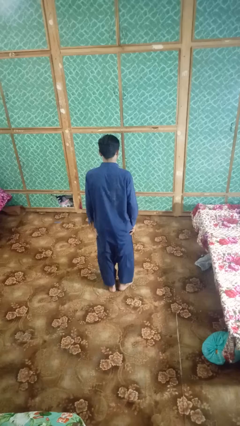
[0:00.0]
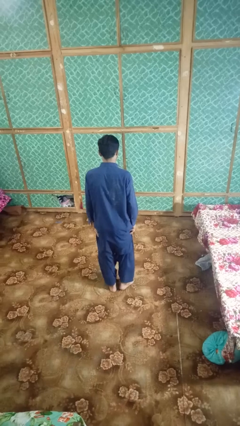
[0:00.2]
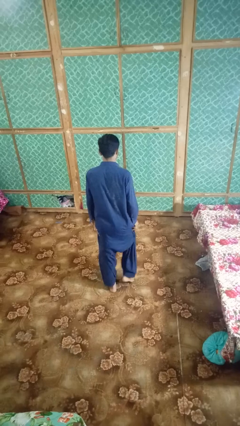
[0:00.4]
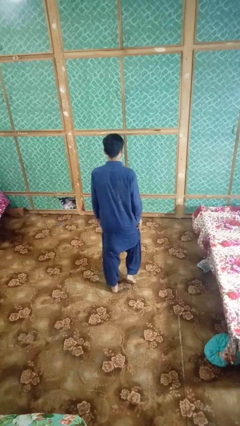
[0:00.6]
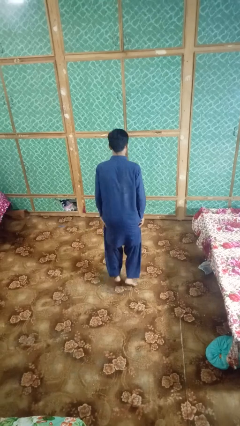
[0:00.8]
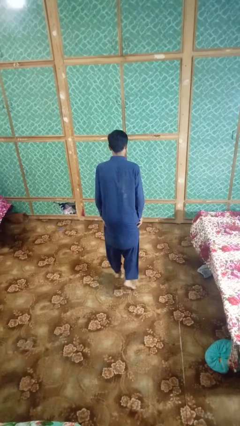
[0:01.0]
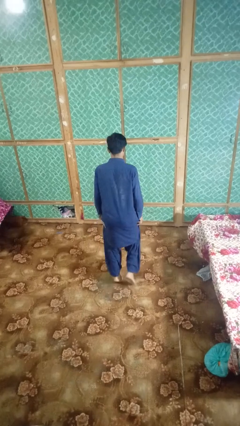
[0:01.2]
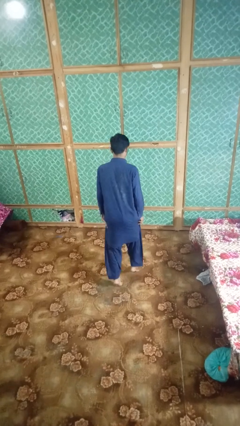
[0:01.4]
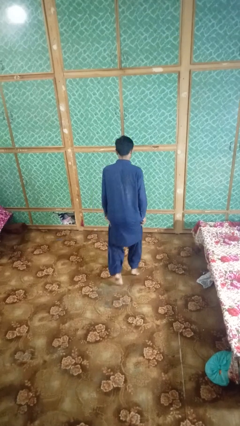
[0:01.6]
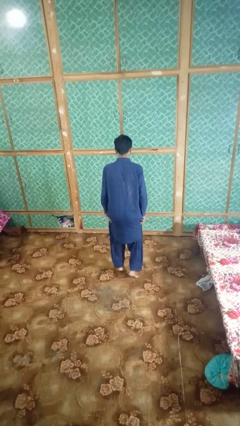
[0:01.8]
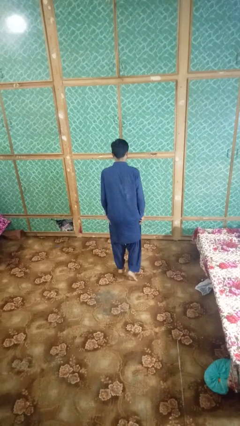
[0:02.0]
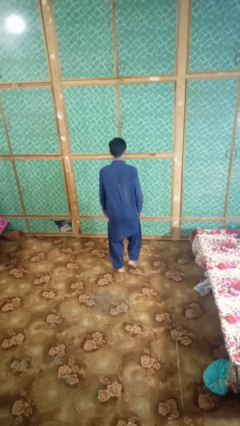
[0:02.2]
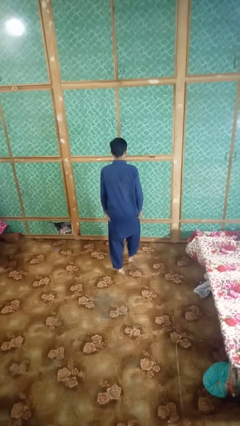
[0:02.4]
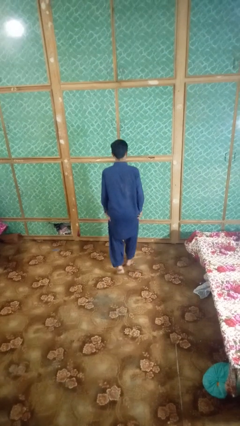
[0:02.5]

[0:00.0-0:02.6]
person walks tiptoe

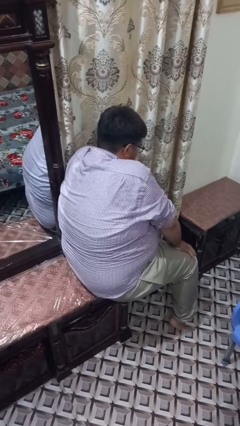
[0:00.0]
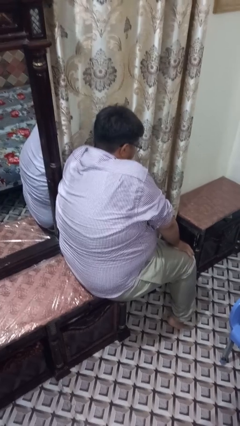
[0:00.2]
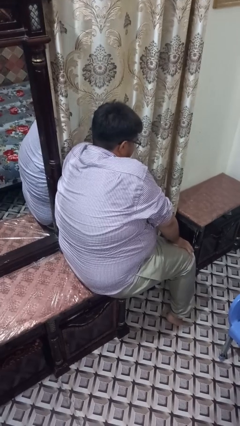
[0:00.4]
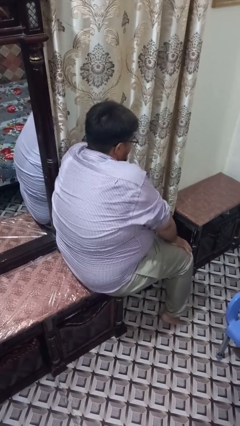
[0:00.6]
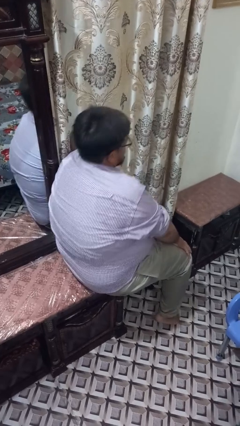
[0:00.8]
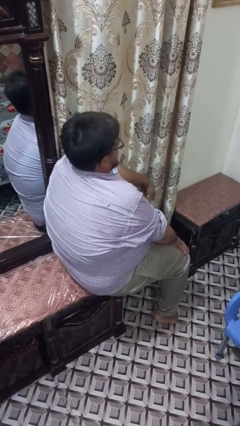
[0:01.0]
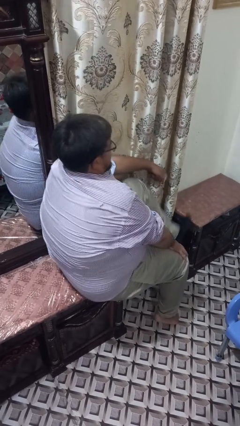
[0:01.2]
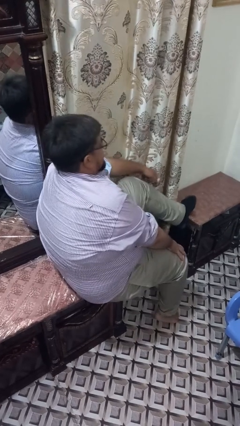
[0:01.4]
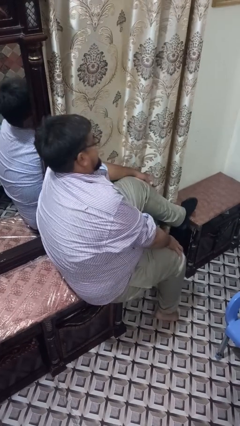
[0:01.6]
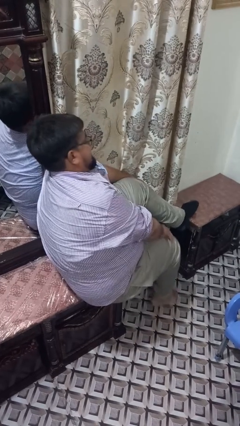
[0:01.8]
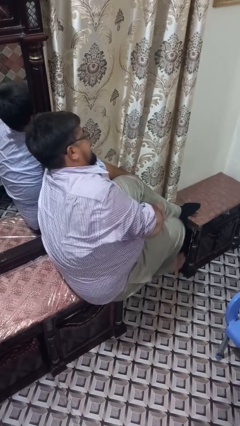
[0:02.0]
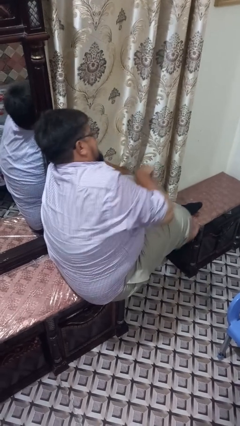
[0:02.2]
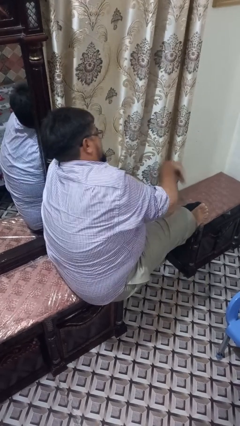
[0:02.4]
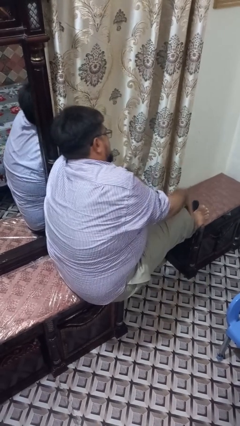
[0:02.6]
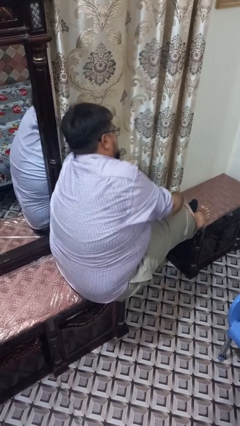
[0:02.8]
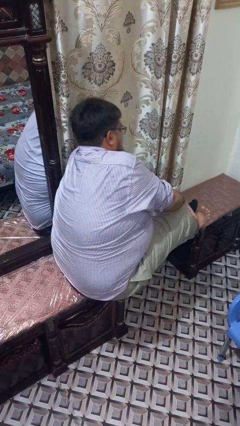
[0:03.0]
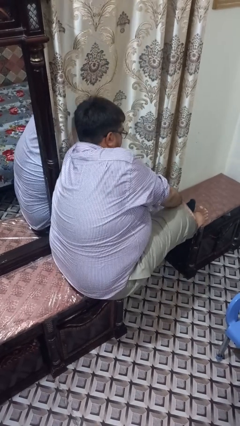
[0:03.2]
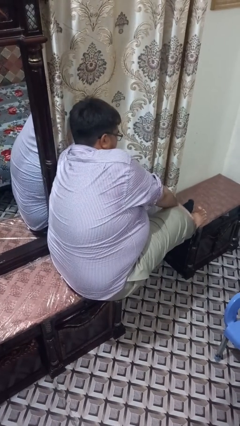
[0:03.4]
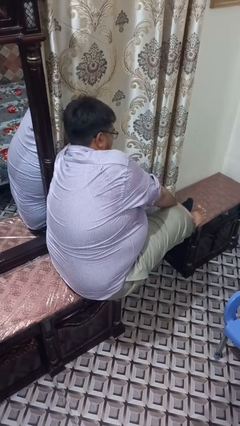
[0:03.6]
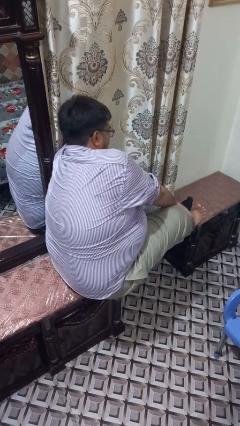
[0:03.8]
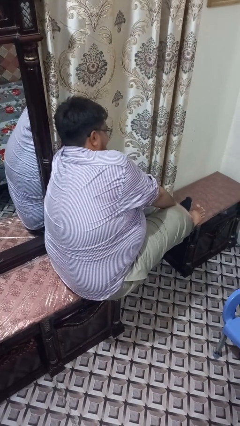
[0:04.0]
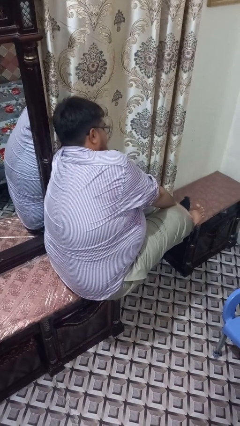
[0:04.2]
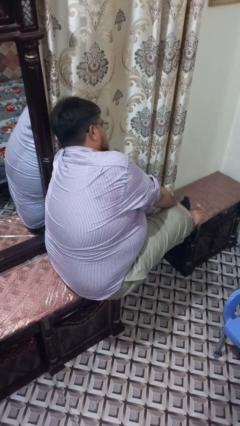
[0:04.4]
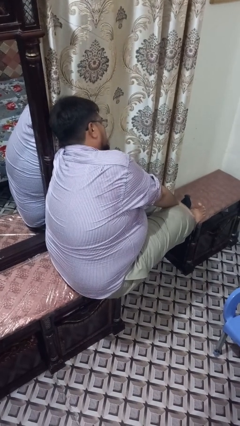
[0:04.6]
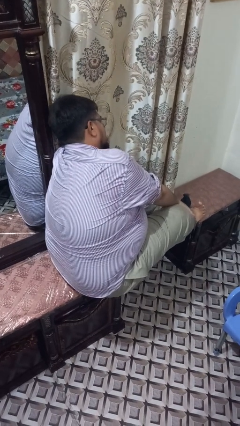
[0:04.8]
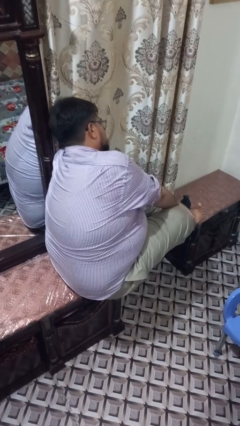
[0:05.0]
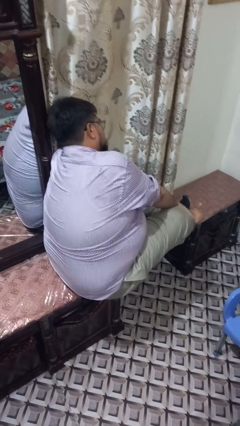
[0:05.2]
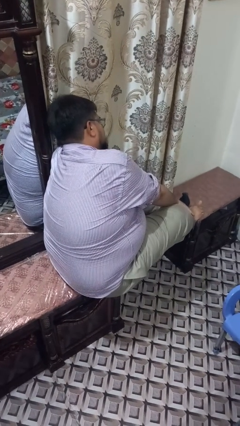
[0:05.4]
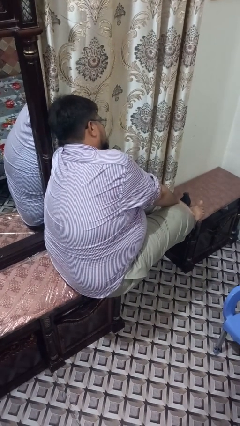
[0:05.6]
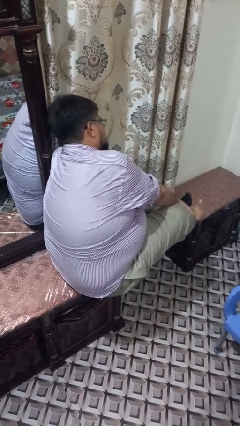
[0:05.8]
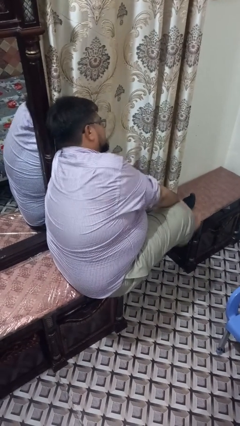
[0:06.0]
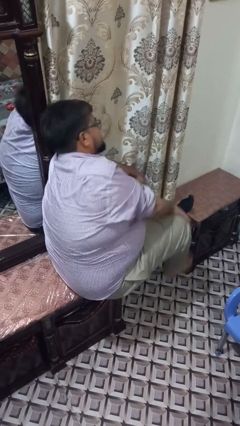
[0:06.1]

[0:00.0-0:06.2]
person puts feet up

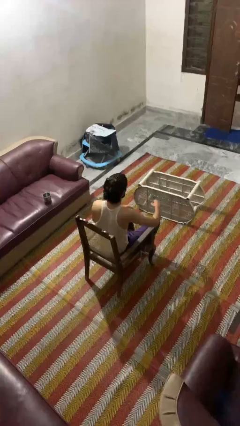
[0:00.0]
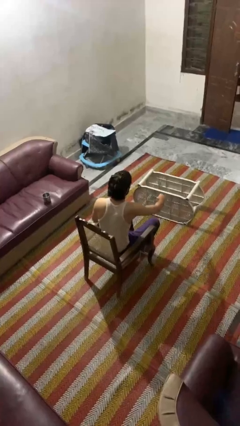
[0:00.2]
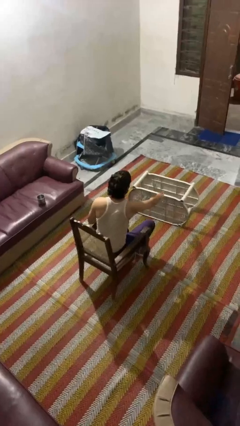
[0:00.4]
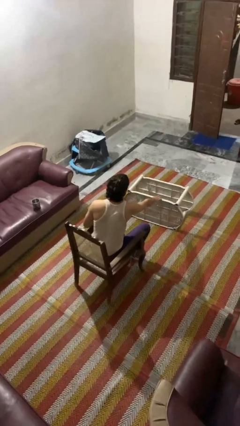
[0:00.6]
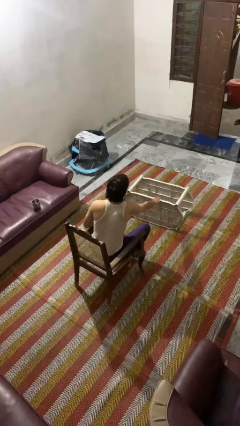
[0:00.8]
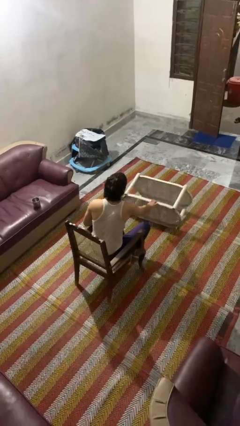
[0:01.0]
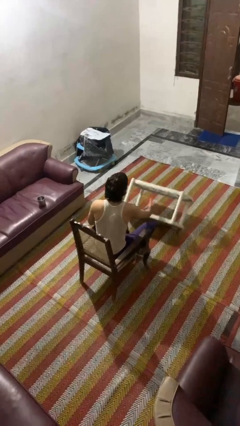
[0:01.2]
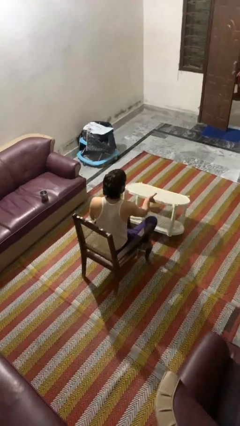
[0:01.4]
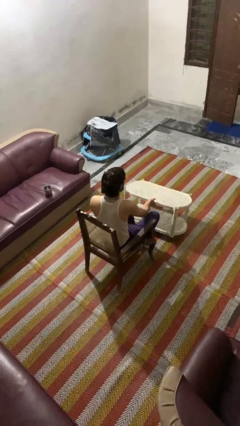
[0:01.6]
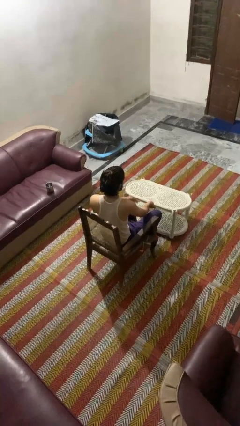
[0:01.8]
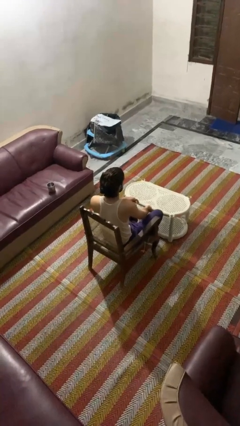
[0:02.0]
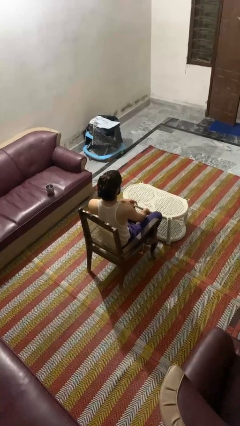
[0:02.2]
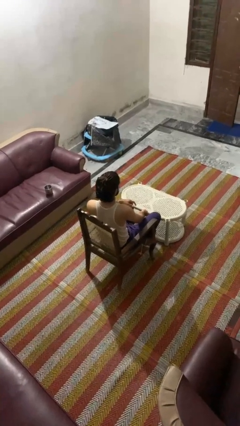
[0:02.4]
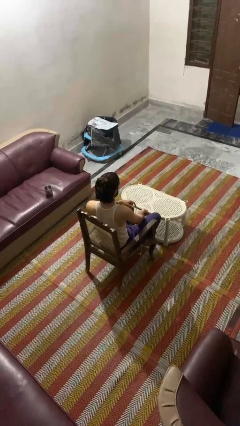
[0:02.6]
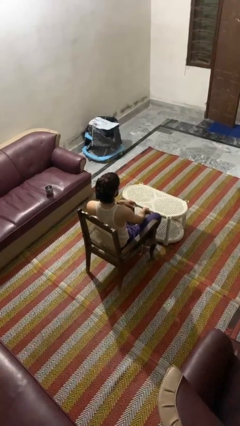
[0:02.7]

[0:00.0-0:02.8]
person sets upright furniture

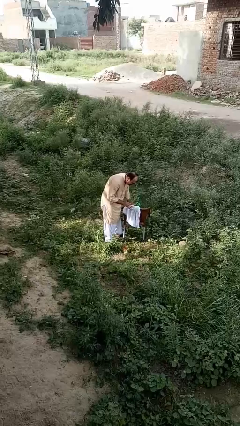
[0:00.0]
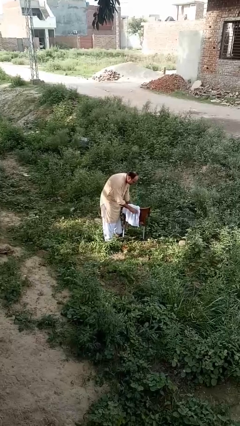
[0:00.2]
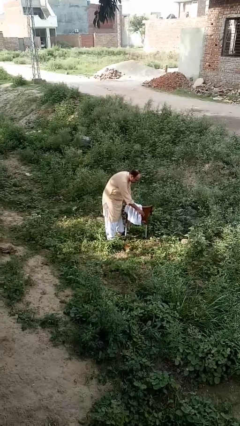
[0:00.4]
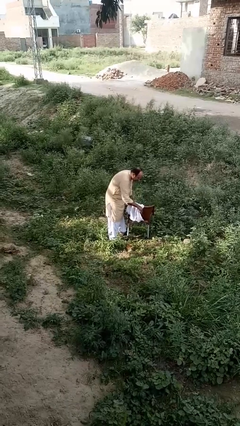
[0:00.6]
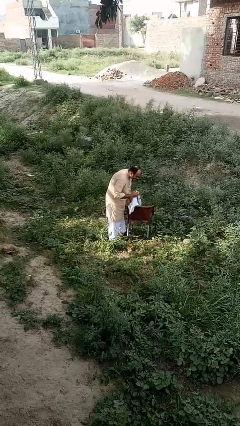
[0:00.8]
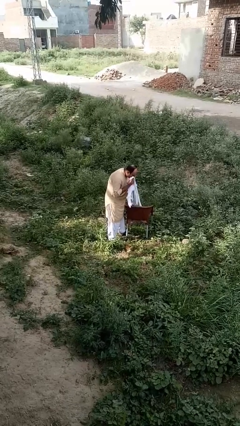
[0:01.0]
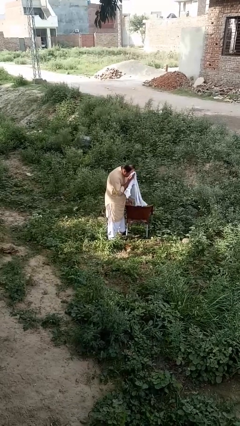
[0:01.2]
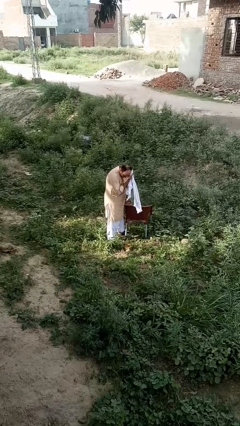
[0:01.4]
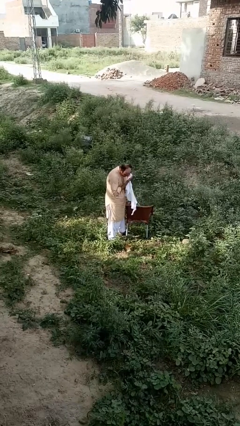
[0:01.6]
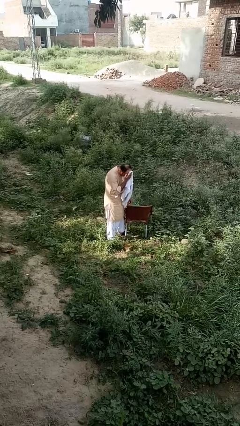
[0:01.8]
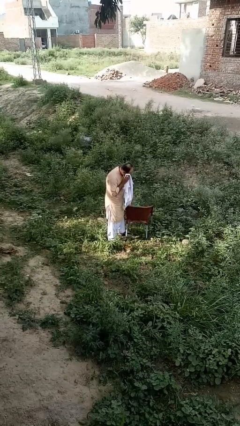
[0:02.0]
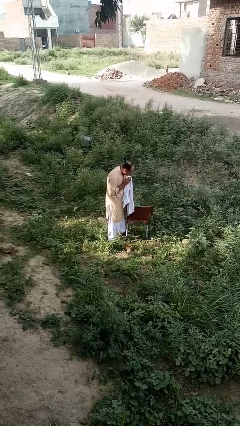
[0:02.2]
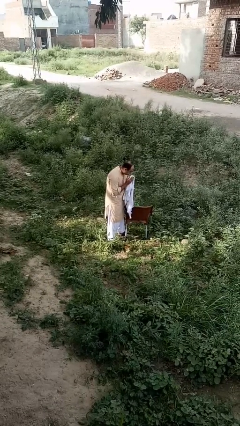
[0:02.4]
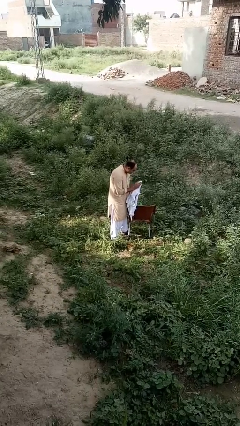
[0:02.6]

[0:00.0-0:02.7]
person dries face with towel

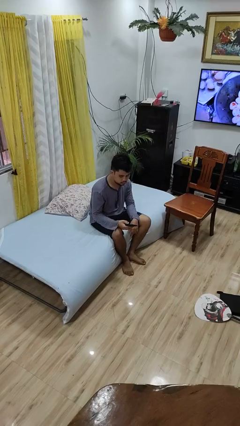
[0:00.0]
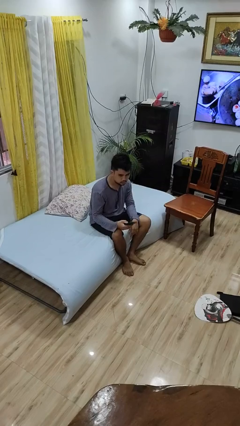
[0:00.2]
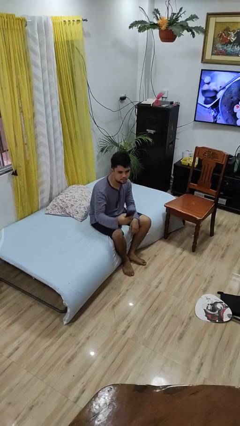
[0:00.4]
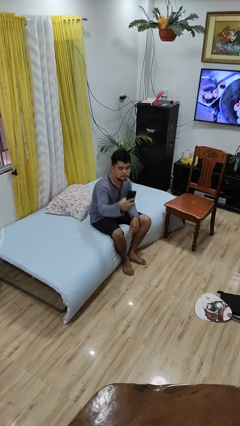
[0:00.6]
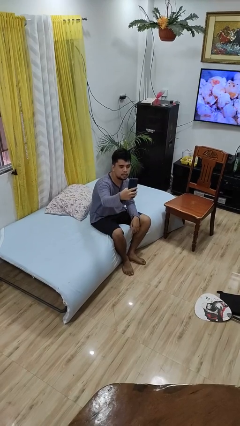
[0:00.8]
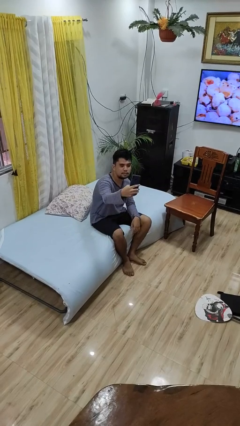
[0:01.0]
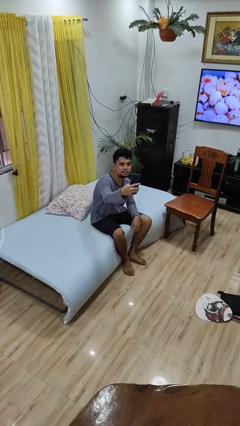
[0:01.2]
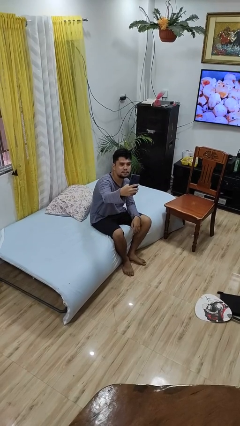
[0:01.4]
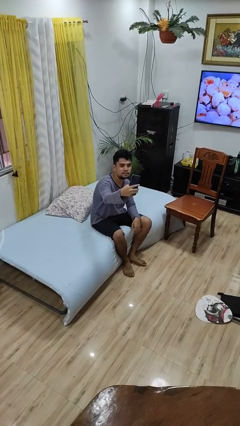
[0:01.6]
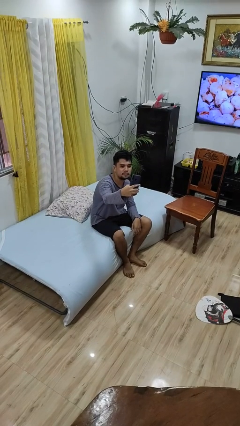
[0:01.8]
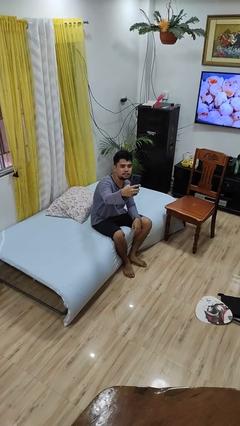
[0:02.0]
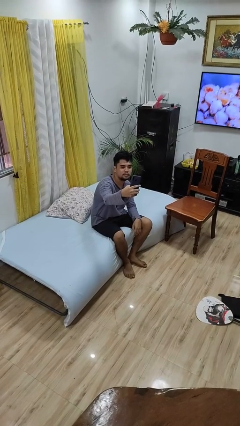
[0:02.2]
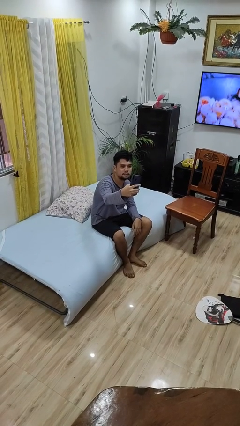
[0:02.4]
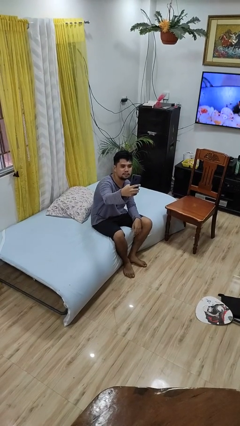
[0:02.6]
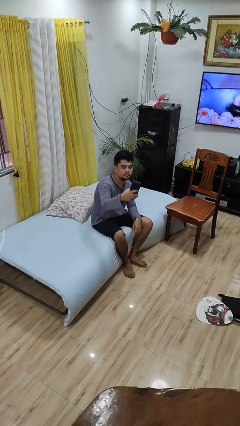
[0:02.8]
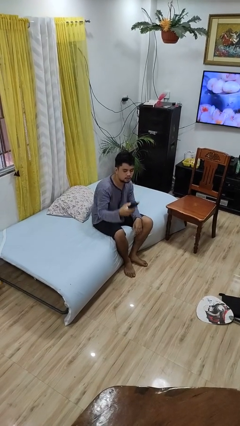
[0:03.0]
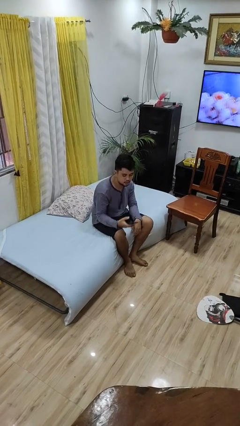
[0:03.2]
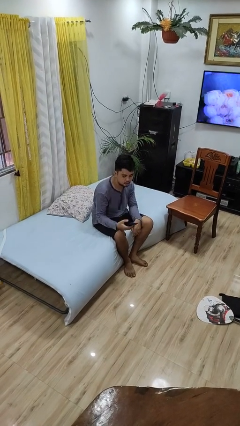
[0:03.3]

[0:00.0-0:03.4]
person takes selfie
